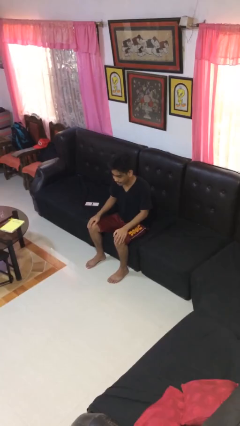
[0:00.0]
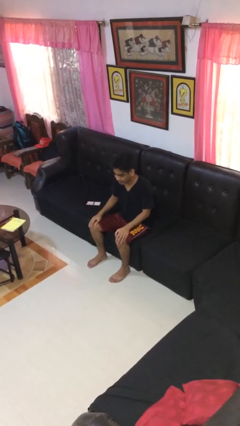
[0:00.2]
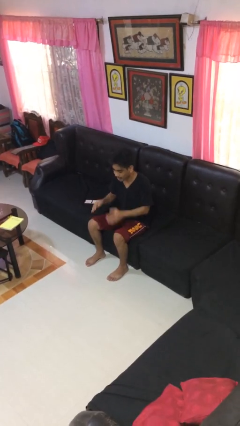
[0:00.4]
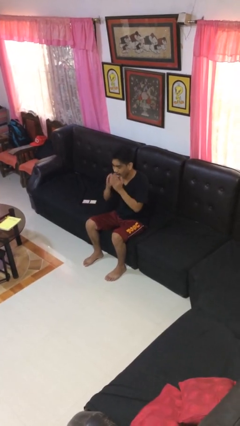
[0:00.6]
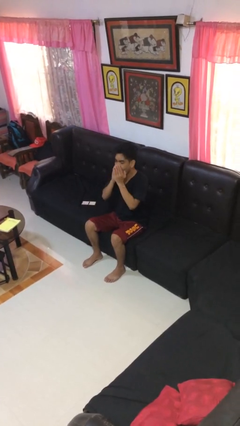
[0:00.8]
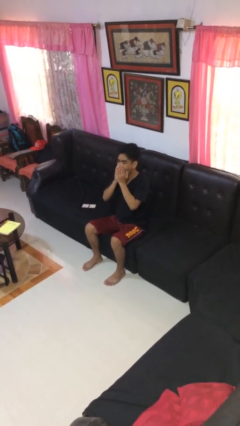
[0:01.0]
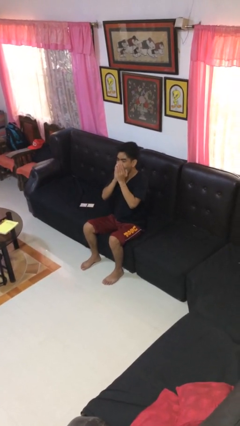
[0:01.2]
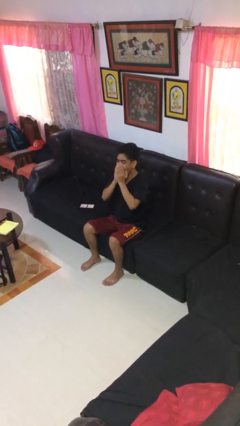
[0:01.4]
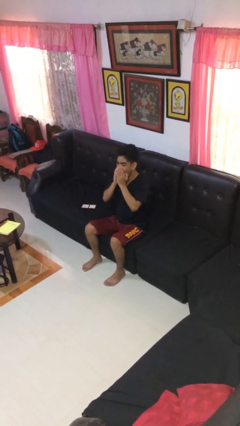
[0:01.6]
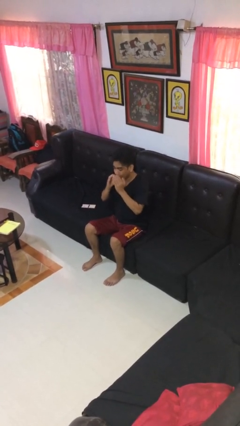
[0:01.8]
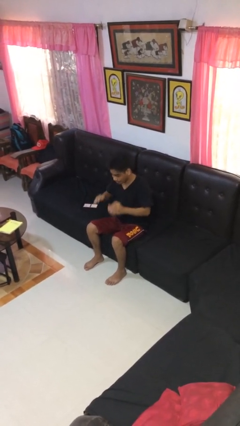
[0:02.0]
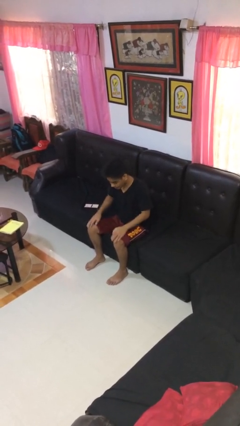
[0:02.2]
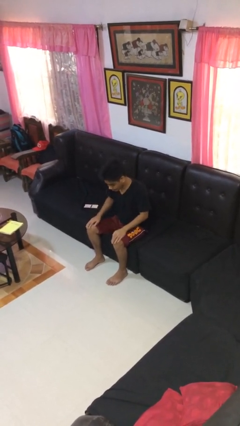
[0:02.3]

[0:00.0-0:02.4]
person yawns

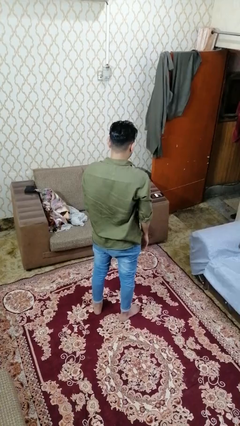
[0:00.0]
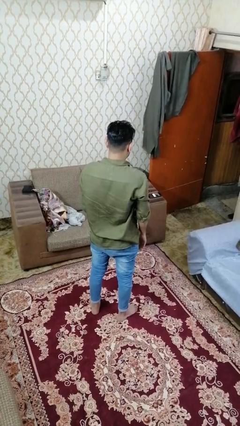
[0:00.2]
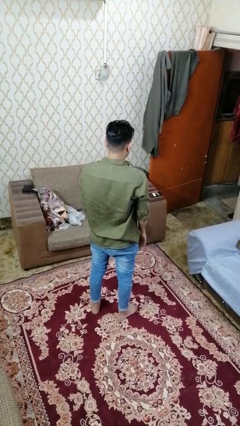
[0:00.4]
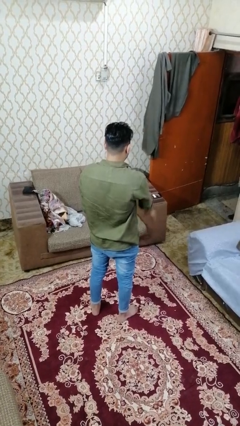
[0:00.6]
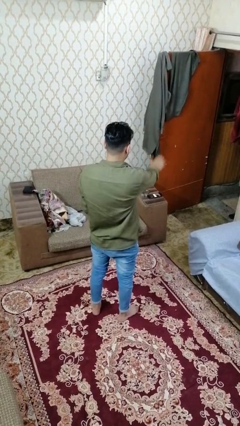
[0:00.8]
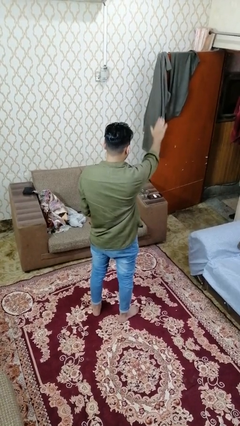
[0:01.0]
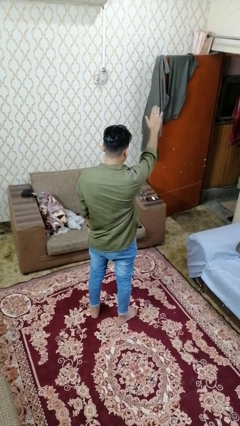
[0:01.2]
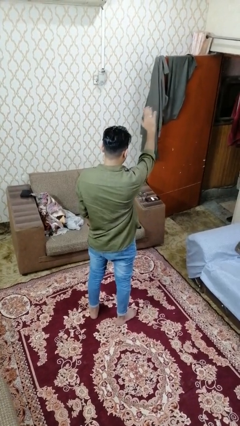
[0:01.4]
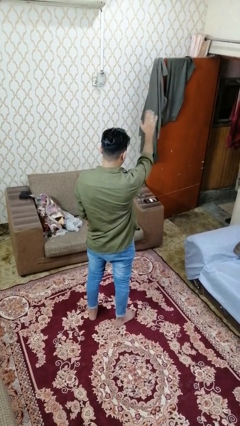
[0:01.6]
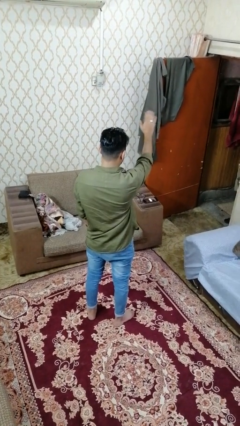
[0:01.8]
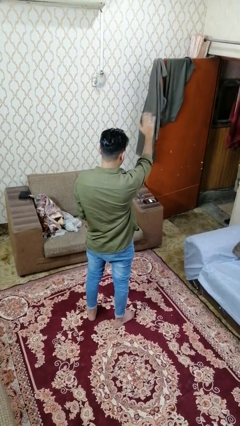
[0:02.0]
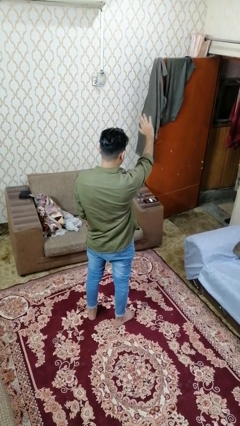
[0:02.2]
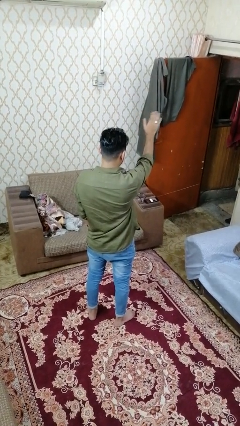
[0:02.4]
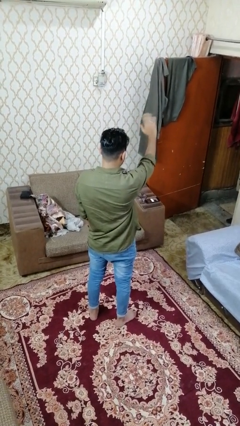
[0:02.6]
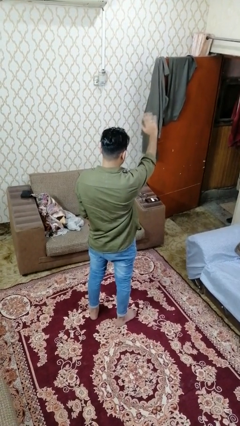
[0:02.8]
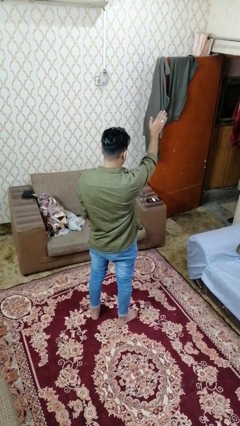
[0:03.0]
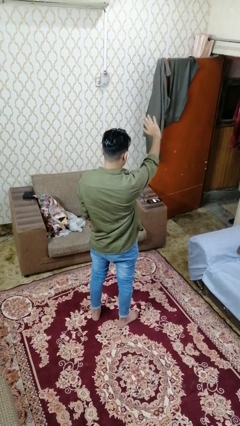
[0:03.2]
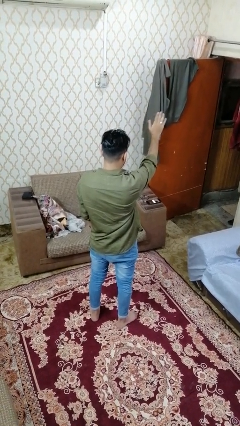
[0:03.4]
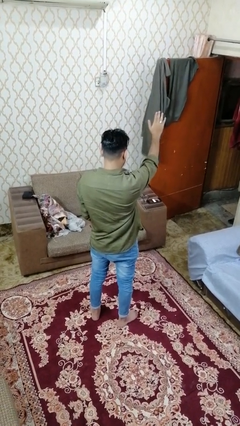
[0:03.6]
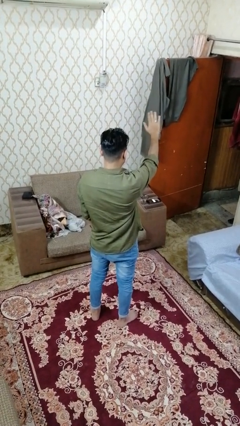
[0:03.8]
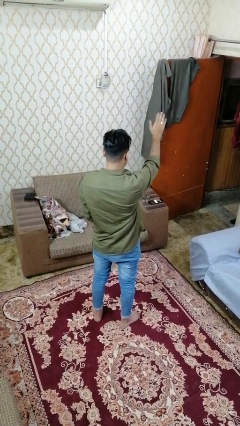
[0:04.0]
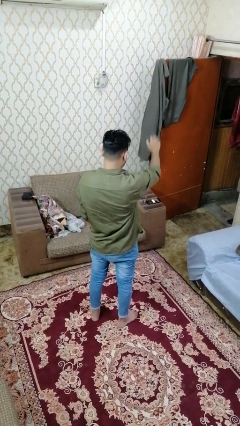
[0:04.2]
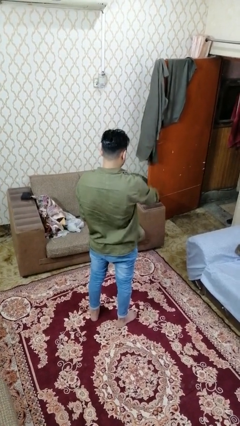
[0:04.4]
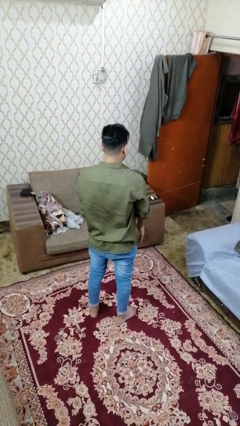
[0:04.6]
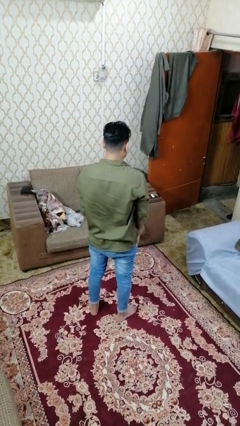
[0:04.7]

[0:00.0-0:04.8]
person carries furniture

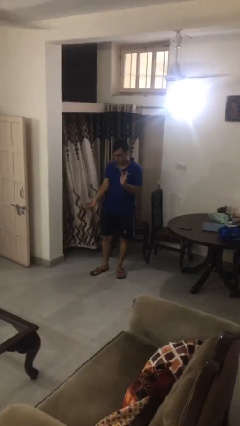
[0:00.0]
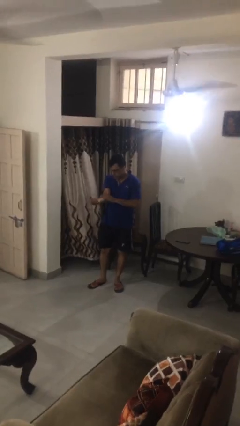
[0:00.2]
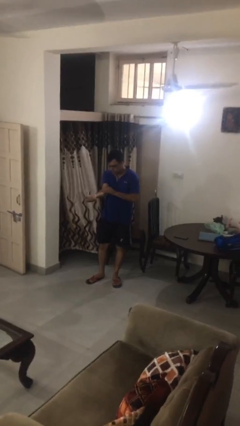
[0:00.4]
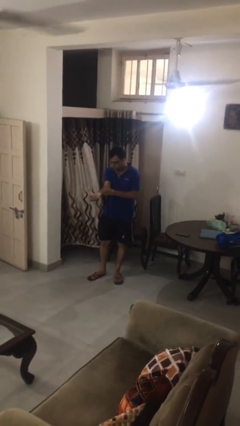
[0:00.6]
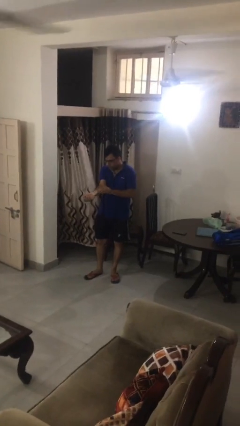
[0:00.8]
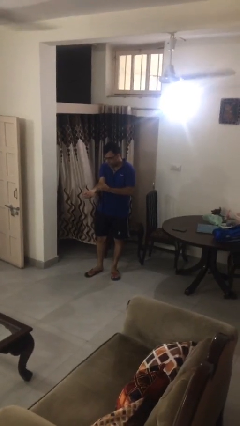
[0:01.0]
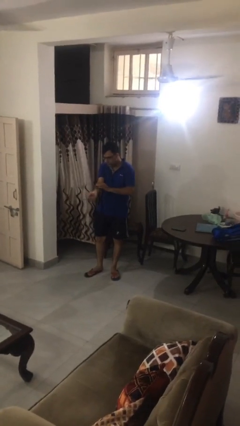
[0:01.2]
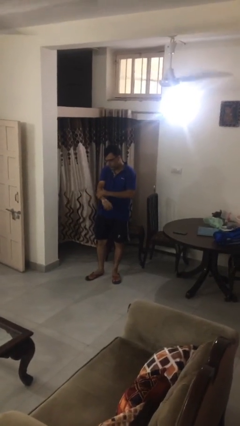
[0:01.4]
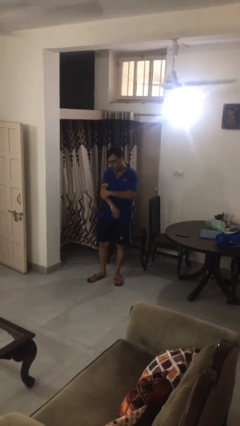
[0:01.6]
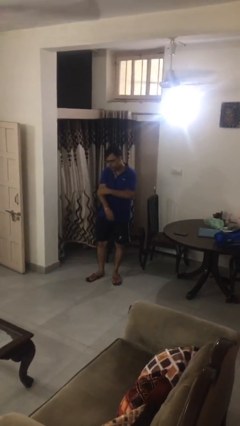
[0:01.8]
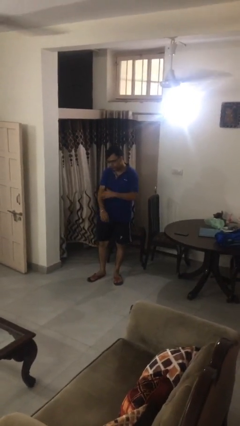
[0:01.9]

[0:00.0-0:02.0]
person swats bug

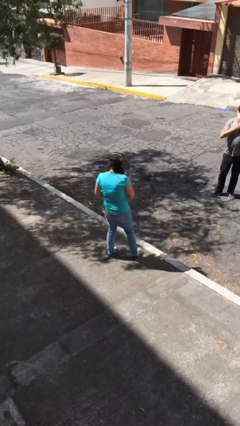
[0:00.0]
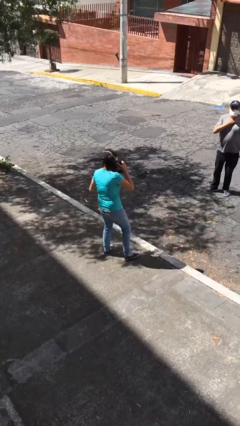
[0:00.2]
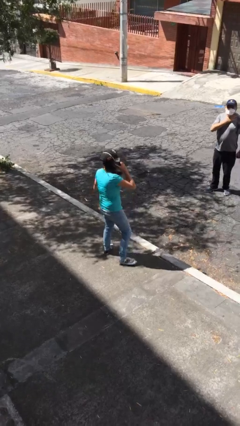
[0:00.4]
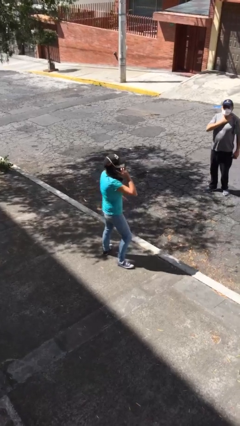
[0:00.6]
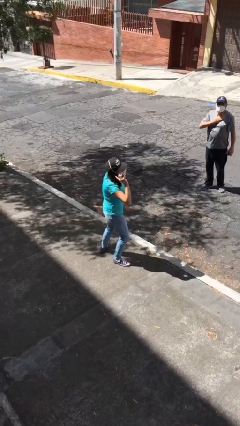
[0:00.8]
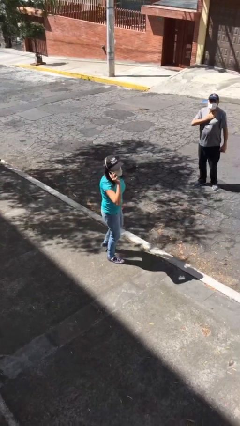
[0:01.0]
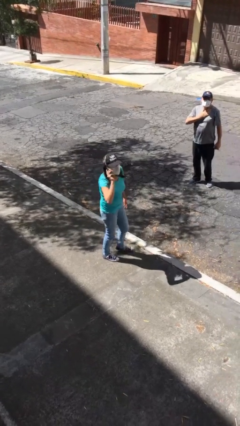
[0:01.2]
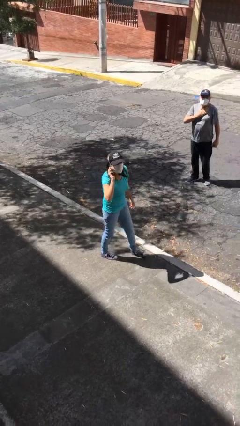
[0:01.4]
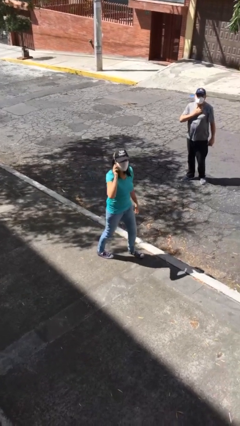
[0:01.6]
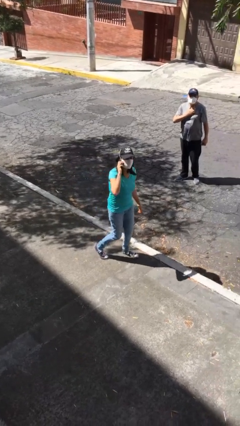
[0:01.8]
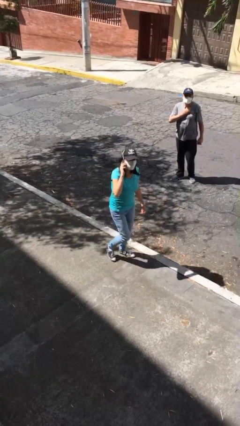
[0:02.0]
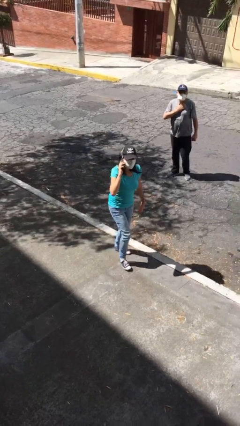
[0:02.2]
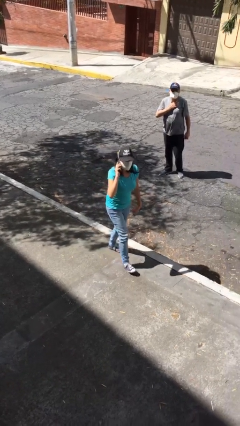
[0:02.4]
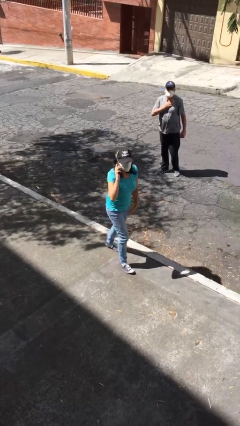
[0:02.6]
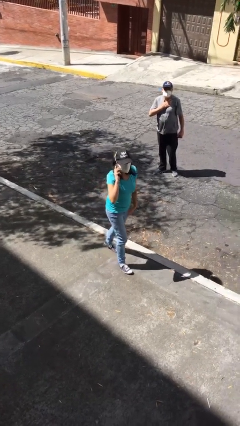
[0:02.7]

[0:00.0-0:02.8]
person talks on phone

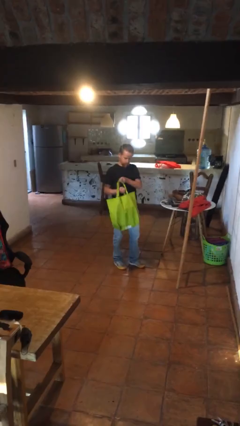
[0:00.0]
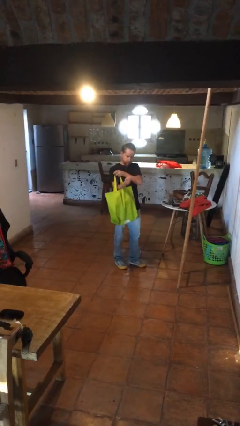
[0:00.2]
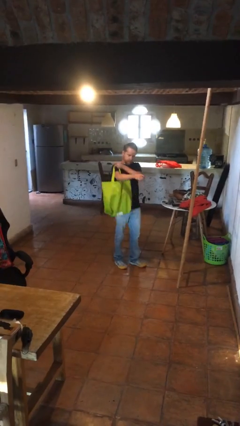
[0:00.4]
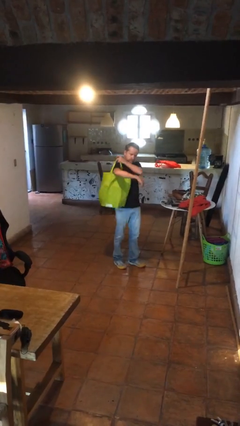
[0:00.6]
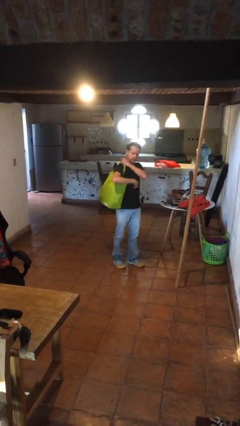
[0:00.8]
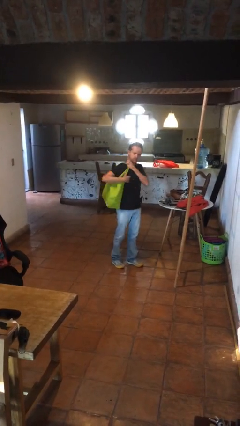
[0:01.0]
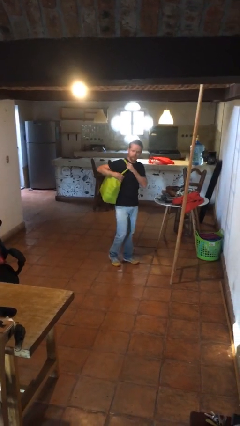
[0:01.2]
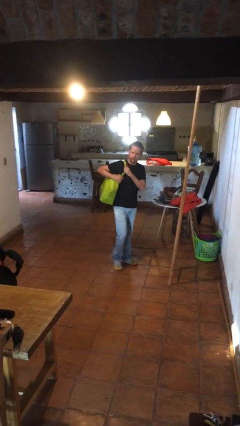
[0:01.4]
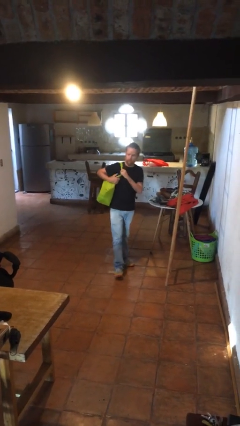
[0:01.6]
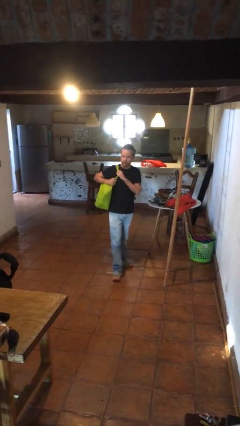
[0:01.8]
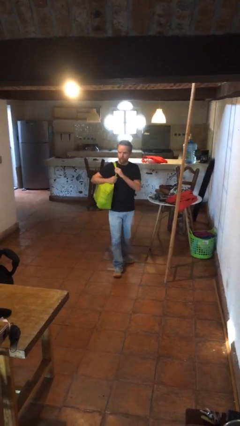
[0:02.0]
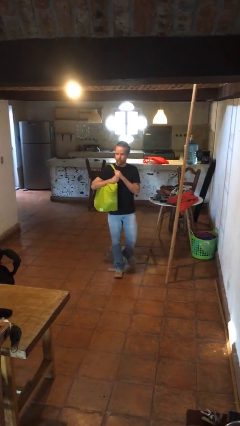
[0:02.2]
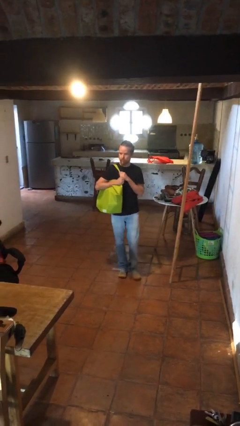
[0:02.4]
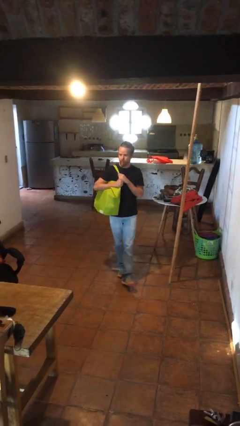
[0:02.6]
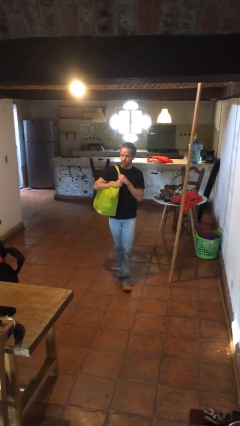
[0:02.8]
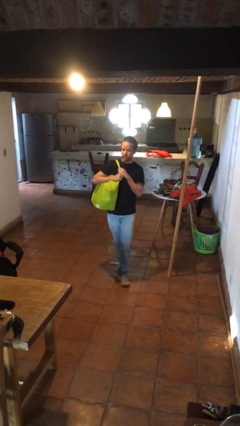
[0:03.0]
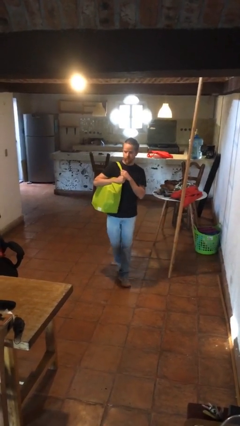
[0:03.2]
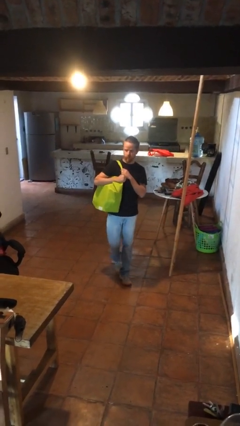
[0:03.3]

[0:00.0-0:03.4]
person carries groceries

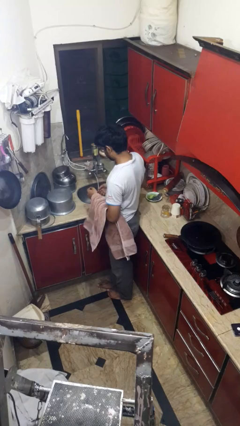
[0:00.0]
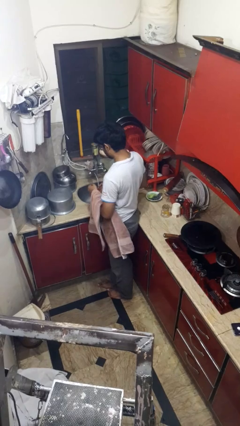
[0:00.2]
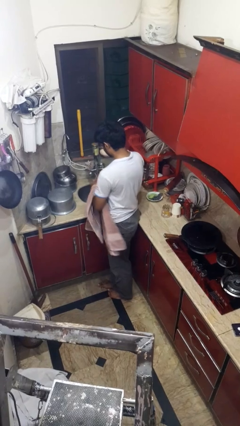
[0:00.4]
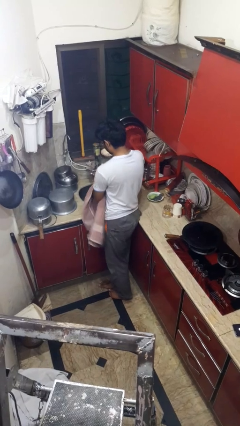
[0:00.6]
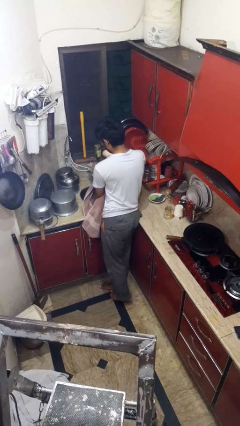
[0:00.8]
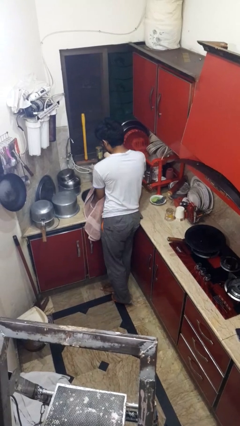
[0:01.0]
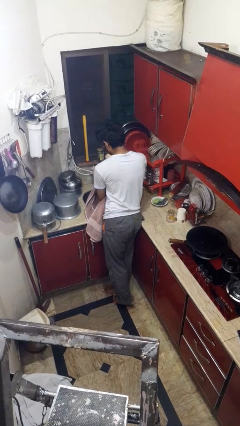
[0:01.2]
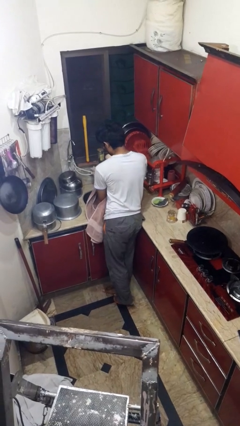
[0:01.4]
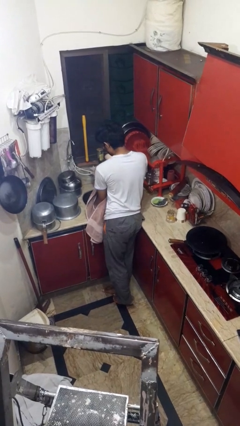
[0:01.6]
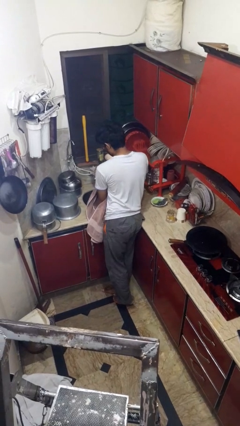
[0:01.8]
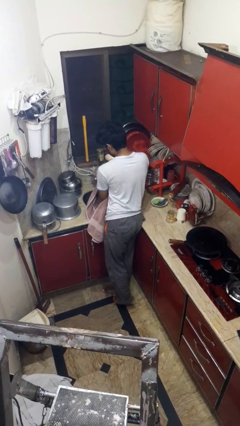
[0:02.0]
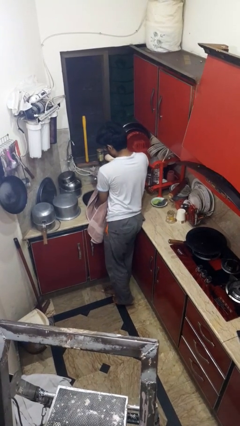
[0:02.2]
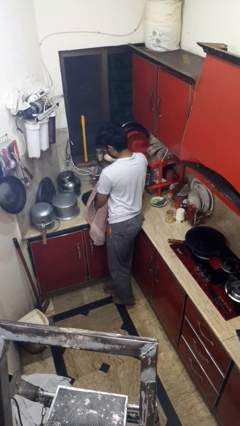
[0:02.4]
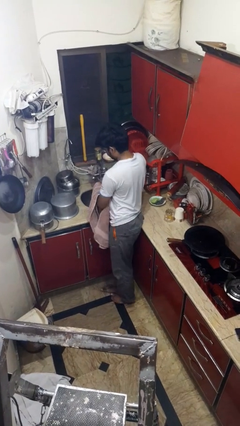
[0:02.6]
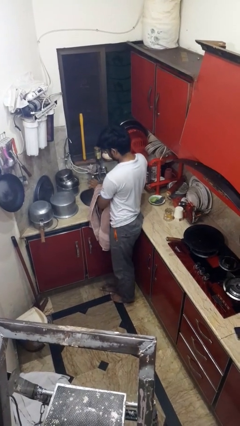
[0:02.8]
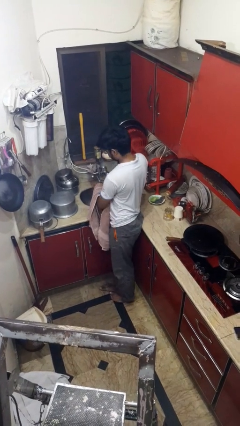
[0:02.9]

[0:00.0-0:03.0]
person washes hands
